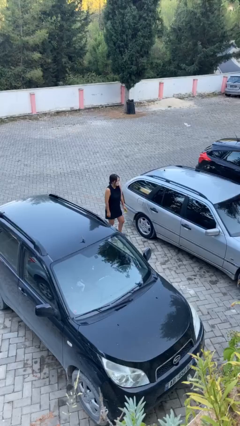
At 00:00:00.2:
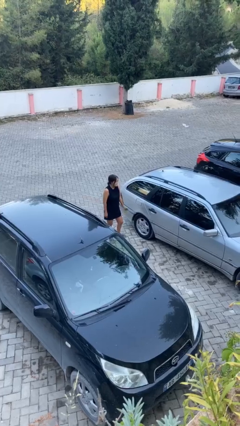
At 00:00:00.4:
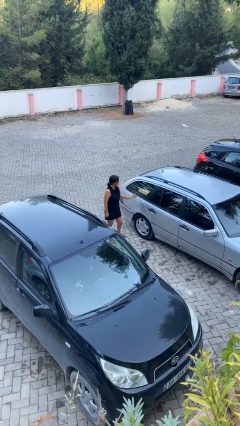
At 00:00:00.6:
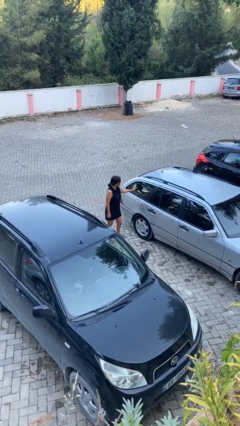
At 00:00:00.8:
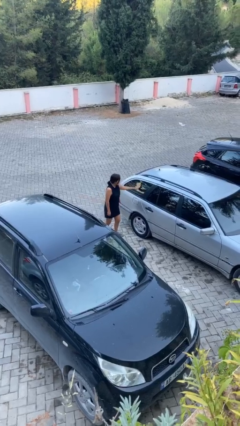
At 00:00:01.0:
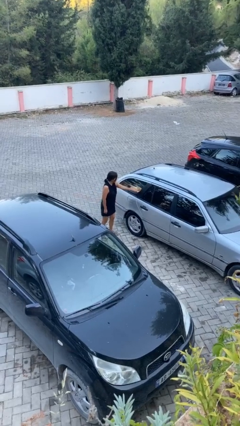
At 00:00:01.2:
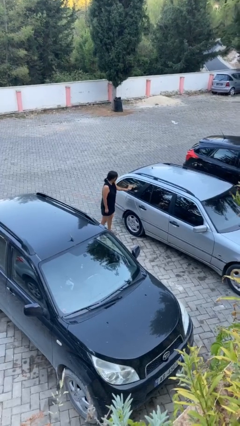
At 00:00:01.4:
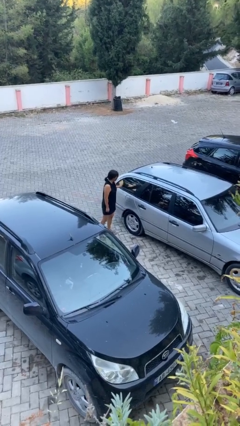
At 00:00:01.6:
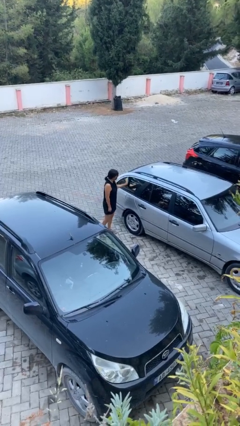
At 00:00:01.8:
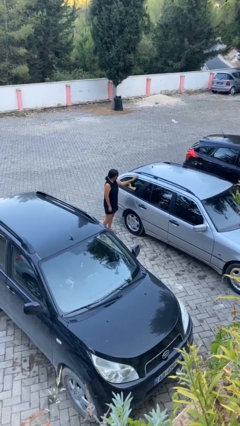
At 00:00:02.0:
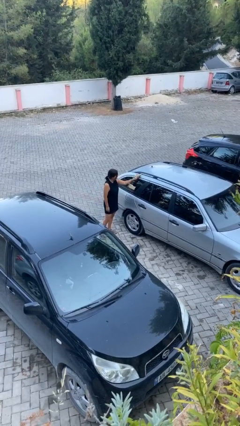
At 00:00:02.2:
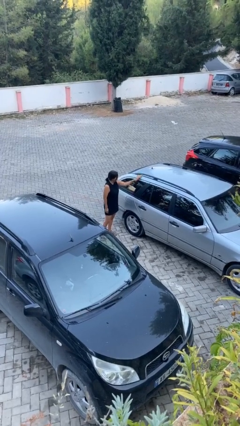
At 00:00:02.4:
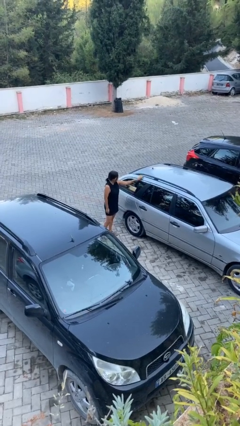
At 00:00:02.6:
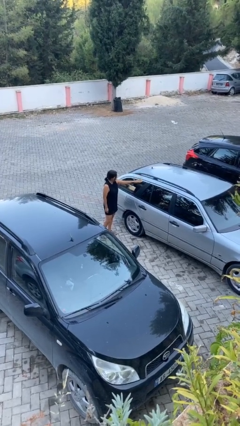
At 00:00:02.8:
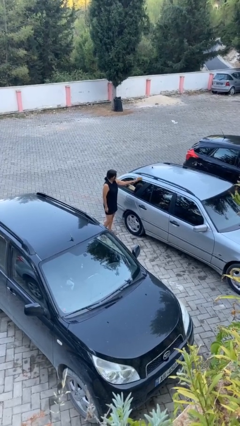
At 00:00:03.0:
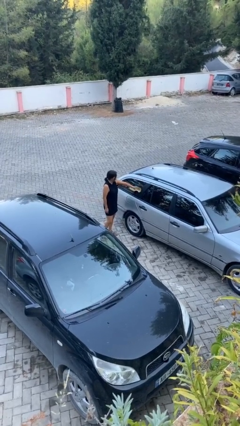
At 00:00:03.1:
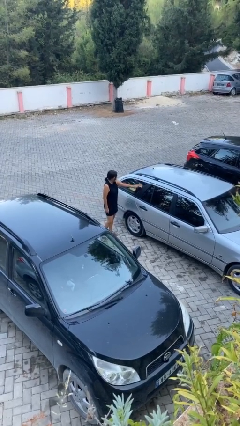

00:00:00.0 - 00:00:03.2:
person polishes car with rag

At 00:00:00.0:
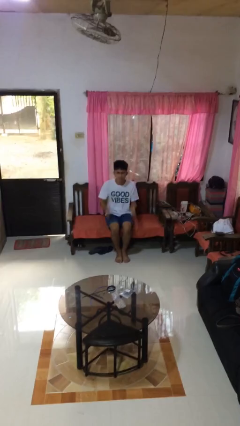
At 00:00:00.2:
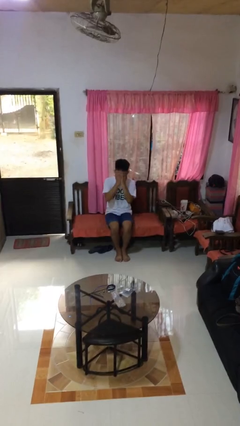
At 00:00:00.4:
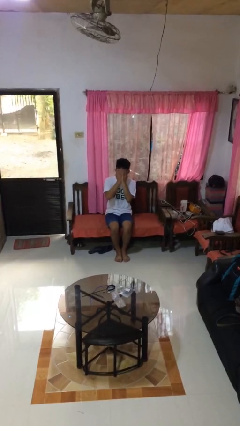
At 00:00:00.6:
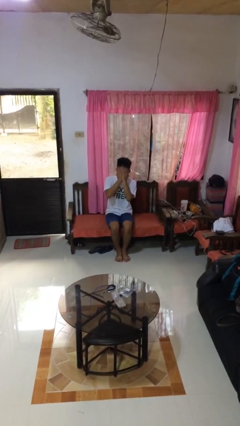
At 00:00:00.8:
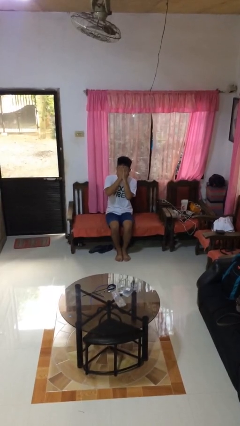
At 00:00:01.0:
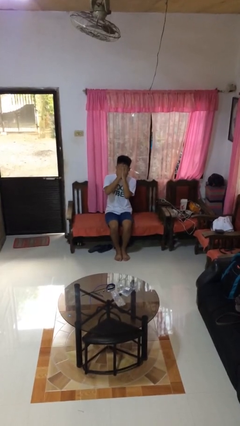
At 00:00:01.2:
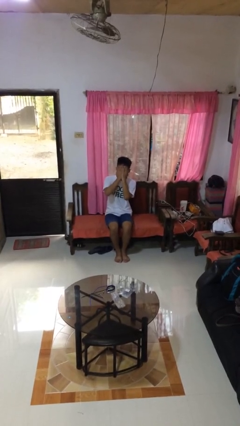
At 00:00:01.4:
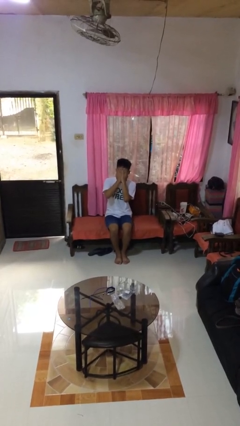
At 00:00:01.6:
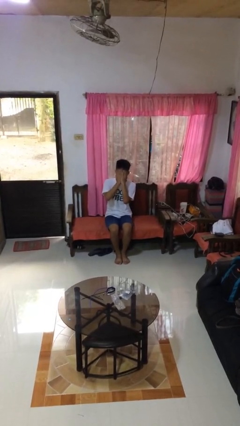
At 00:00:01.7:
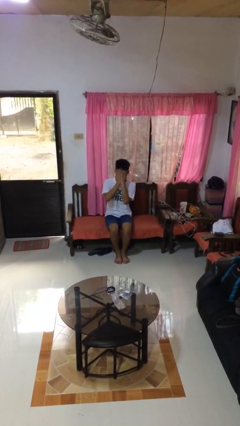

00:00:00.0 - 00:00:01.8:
person covers face with hands

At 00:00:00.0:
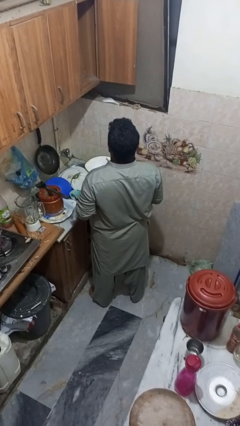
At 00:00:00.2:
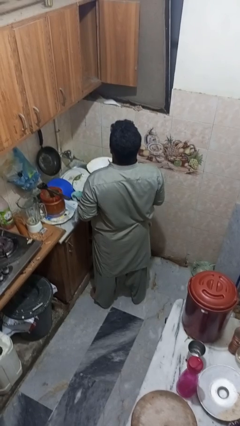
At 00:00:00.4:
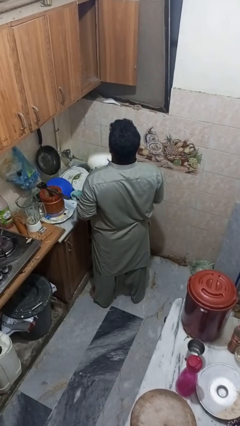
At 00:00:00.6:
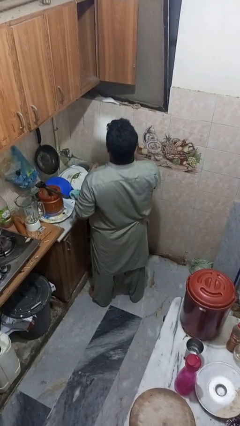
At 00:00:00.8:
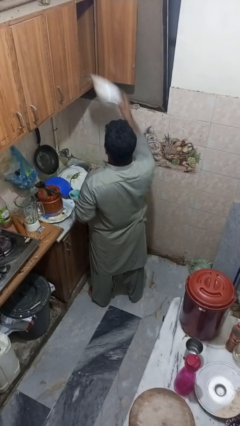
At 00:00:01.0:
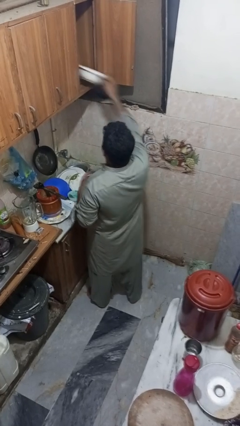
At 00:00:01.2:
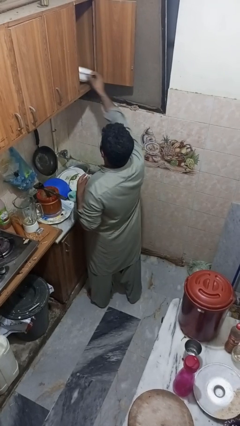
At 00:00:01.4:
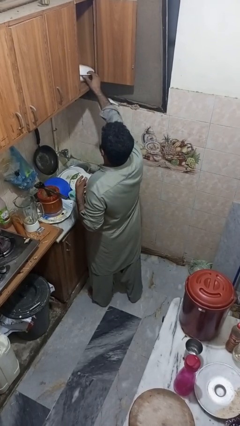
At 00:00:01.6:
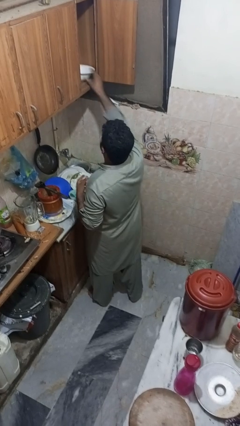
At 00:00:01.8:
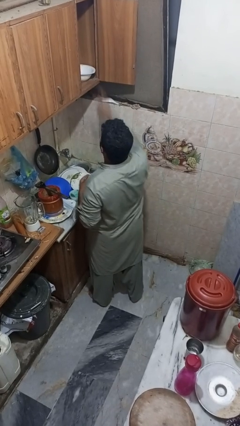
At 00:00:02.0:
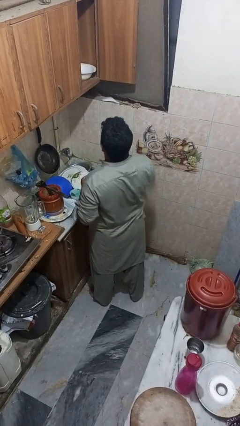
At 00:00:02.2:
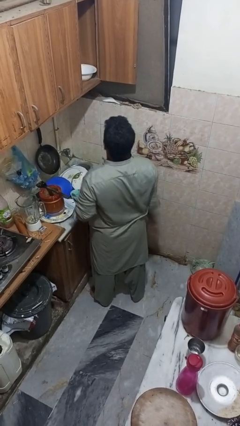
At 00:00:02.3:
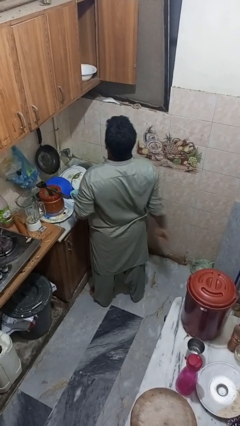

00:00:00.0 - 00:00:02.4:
person puts object in cabinet

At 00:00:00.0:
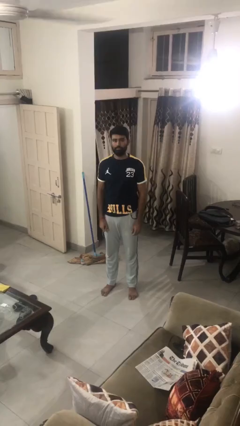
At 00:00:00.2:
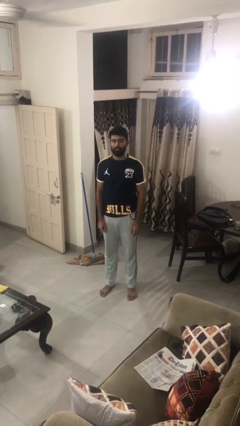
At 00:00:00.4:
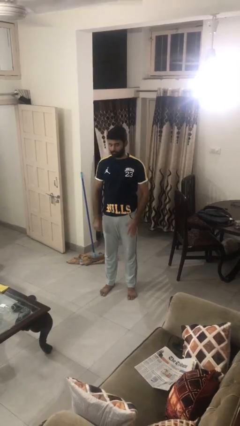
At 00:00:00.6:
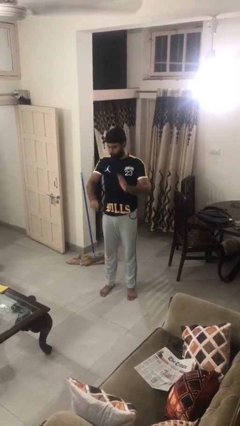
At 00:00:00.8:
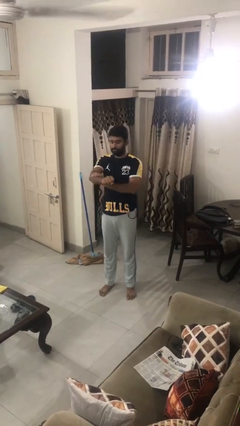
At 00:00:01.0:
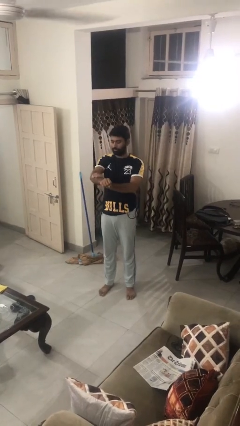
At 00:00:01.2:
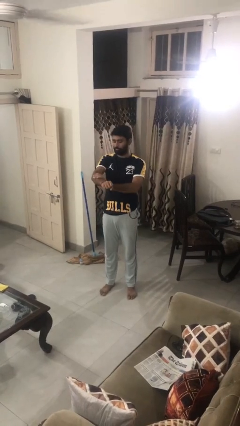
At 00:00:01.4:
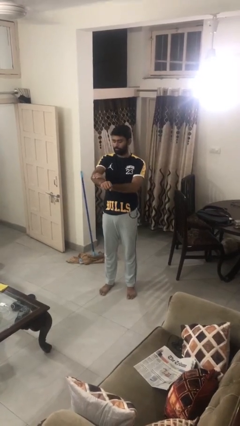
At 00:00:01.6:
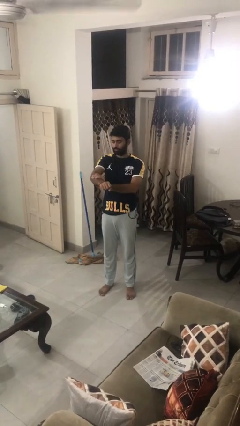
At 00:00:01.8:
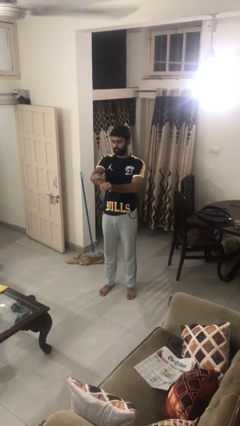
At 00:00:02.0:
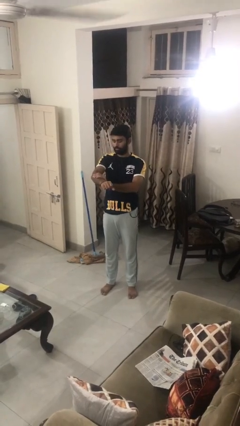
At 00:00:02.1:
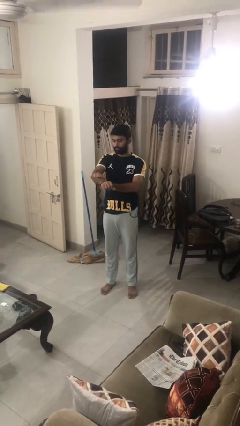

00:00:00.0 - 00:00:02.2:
person swats bug

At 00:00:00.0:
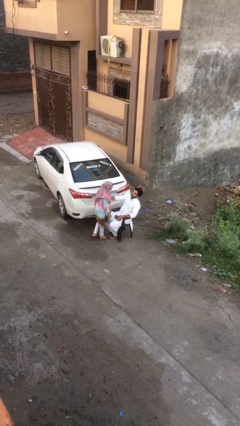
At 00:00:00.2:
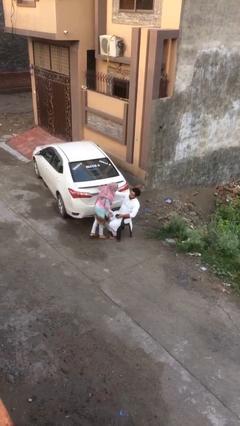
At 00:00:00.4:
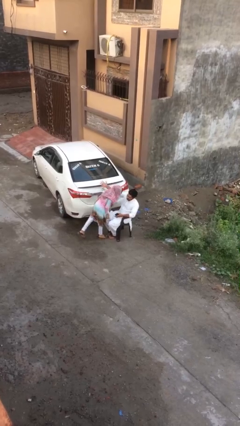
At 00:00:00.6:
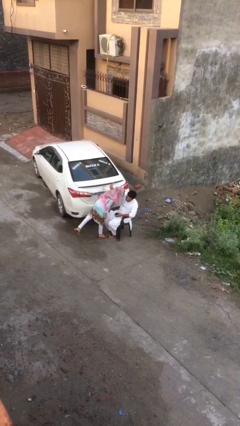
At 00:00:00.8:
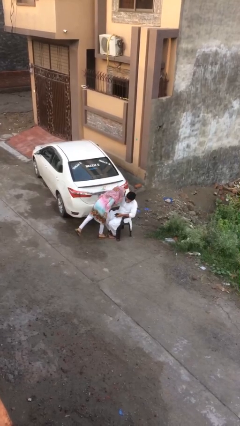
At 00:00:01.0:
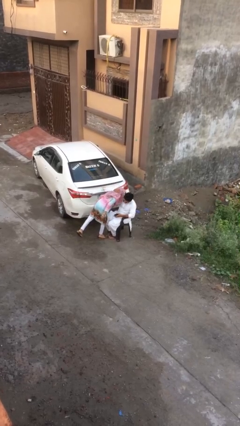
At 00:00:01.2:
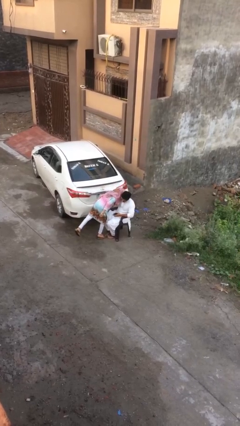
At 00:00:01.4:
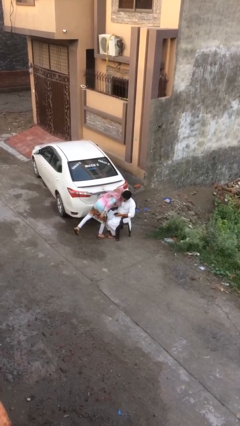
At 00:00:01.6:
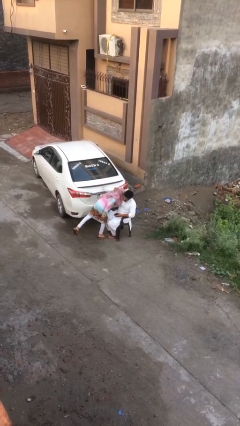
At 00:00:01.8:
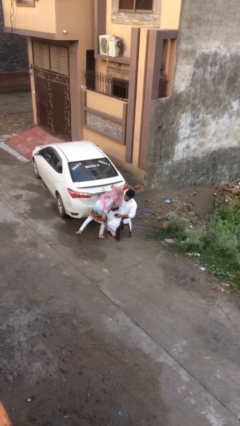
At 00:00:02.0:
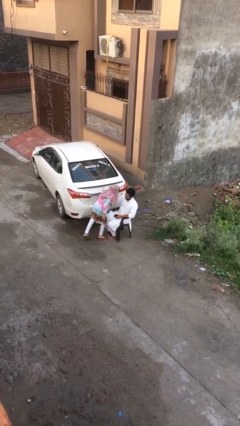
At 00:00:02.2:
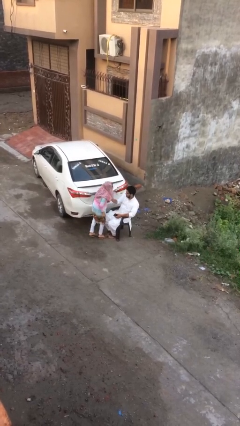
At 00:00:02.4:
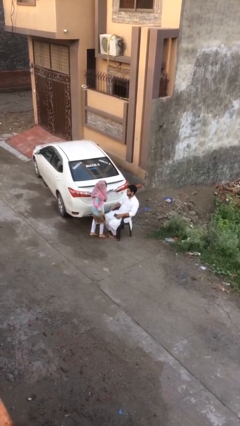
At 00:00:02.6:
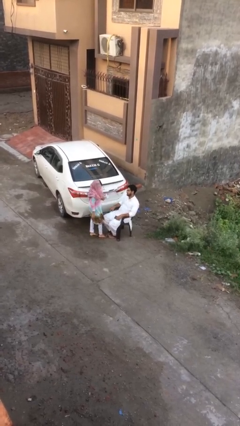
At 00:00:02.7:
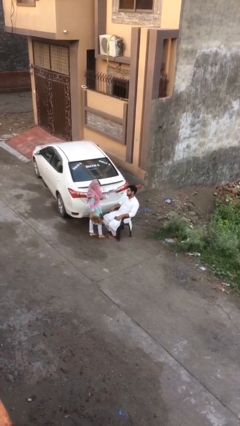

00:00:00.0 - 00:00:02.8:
person embraces person

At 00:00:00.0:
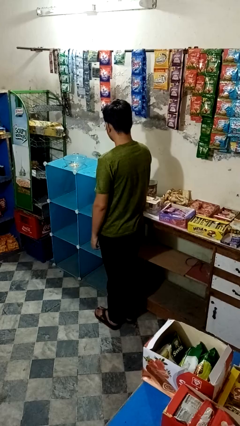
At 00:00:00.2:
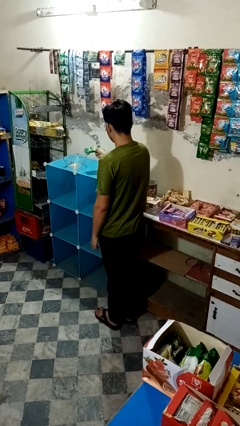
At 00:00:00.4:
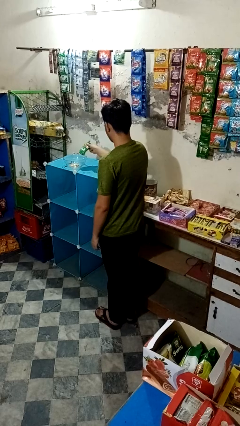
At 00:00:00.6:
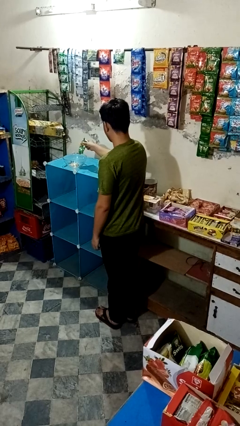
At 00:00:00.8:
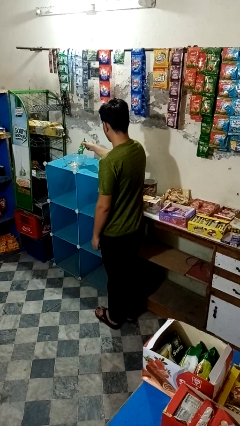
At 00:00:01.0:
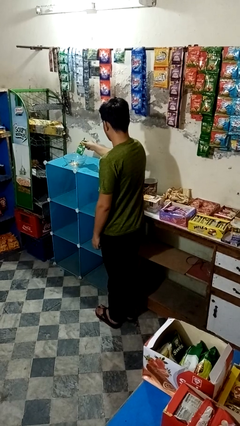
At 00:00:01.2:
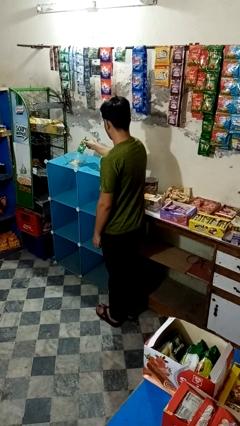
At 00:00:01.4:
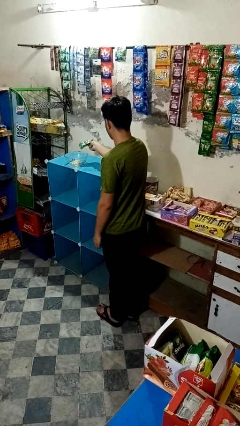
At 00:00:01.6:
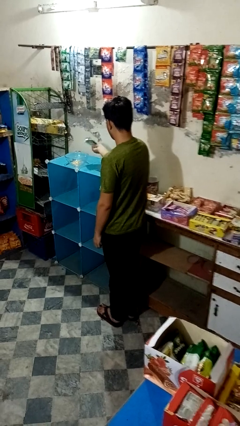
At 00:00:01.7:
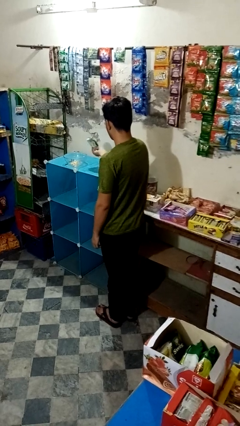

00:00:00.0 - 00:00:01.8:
person pours into bowl

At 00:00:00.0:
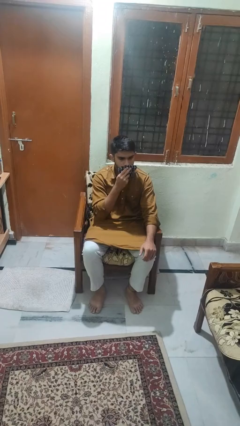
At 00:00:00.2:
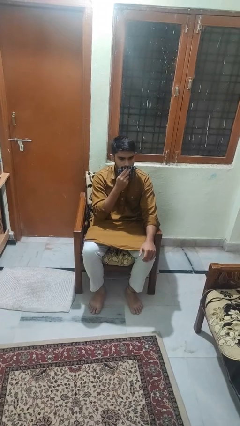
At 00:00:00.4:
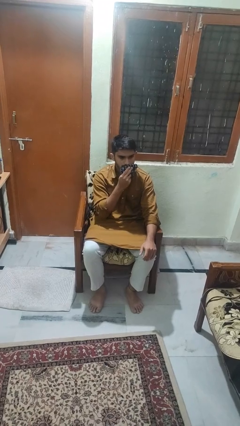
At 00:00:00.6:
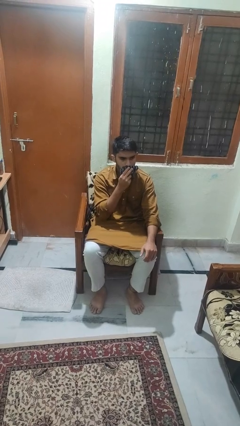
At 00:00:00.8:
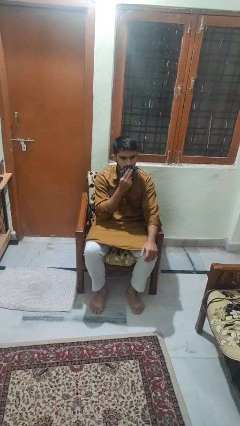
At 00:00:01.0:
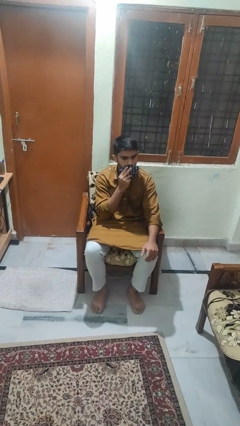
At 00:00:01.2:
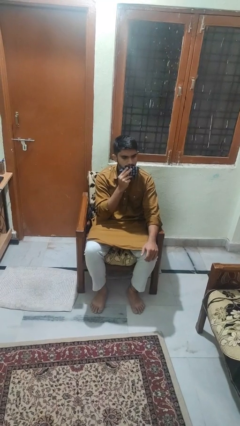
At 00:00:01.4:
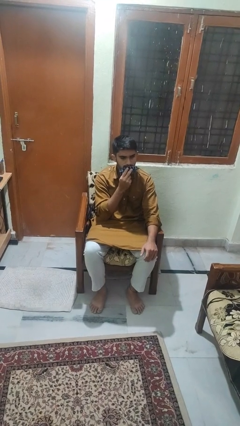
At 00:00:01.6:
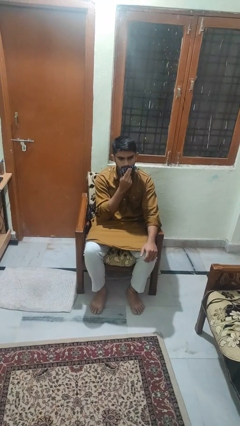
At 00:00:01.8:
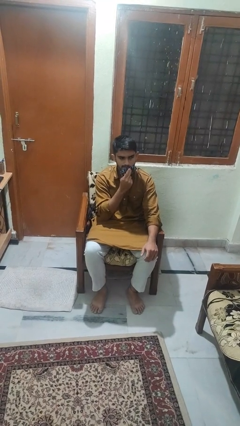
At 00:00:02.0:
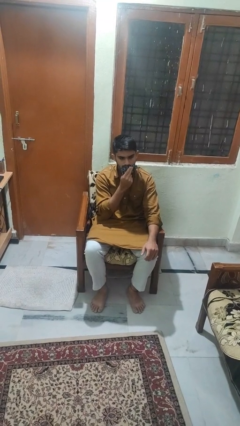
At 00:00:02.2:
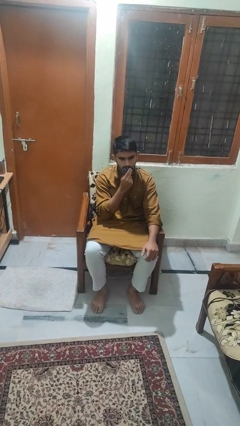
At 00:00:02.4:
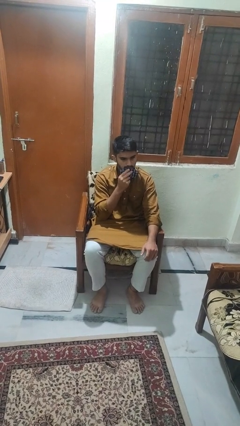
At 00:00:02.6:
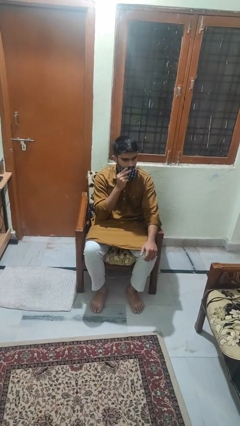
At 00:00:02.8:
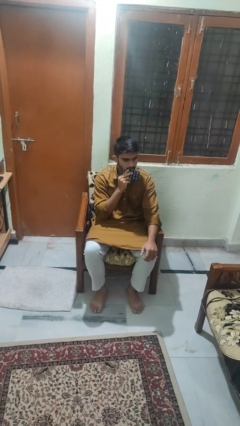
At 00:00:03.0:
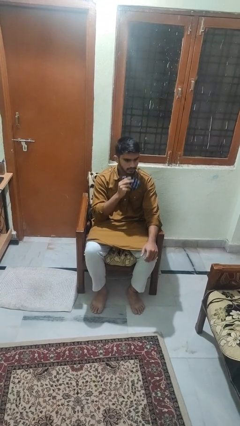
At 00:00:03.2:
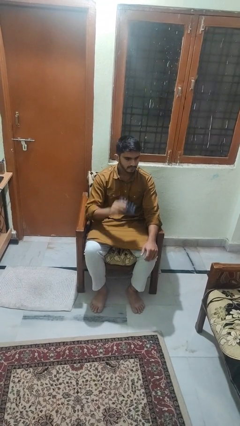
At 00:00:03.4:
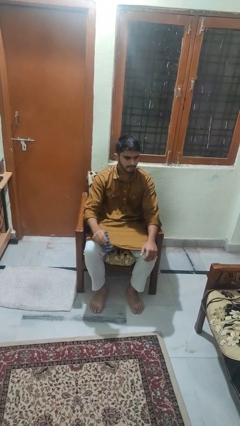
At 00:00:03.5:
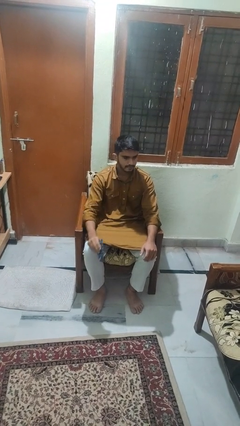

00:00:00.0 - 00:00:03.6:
person wipes mouth with napkin
